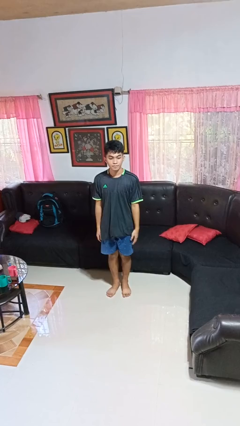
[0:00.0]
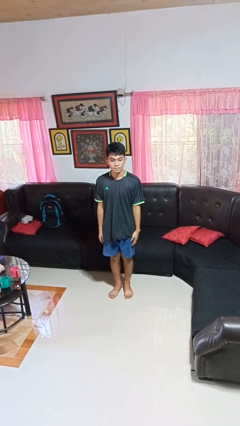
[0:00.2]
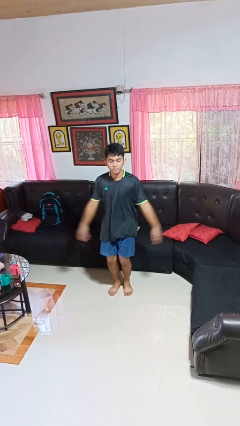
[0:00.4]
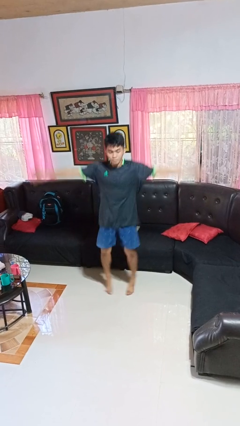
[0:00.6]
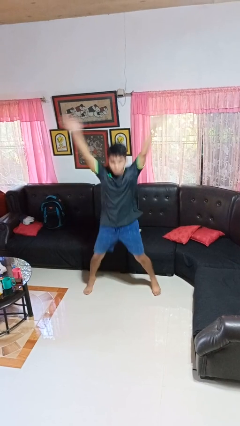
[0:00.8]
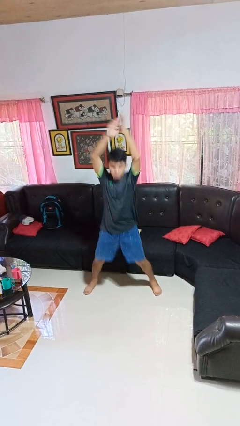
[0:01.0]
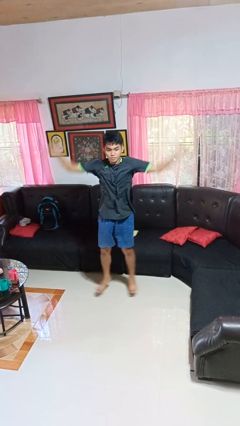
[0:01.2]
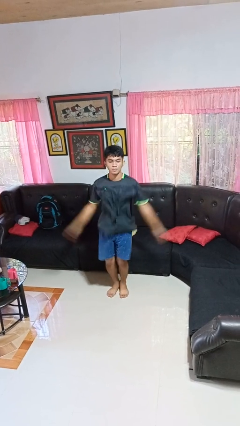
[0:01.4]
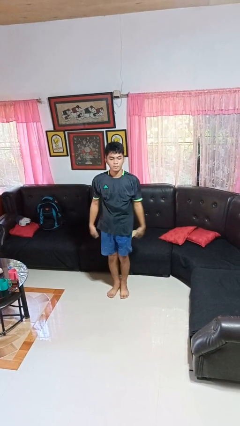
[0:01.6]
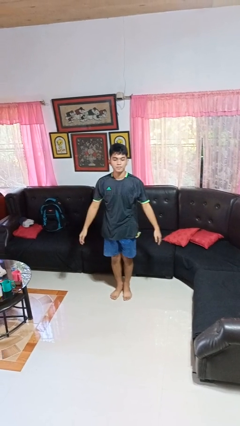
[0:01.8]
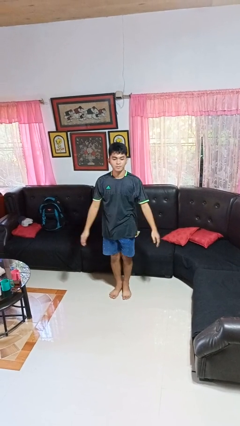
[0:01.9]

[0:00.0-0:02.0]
person exercises with jumping jacks

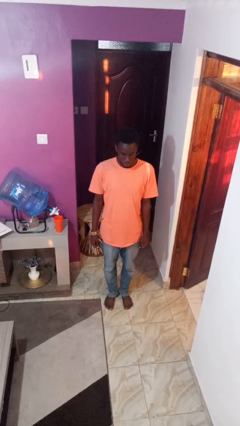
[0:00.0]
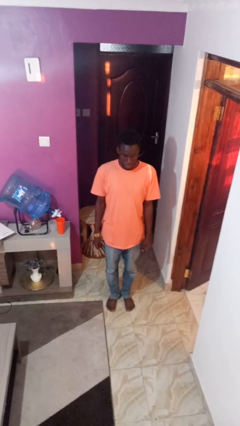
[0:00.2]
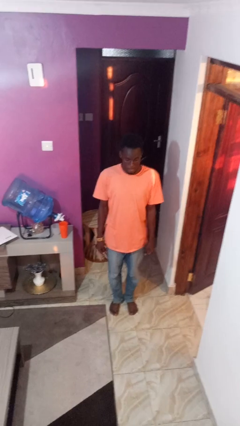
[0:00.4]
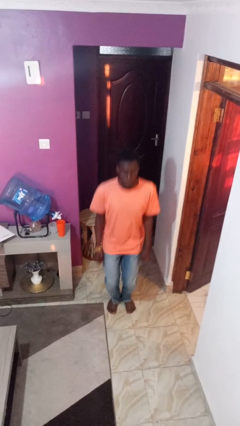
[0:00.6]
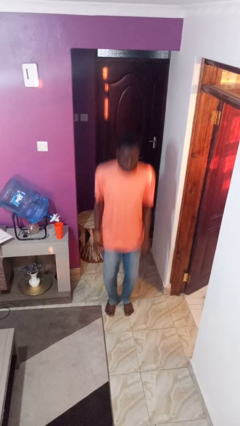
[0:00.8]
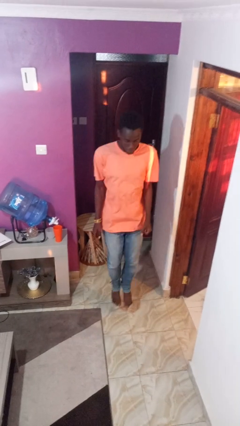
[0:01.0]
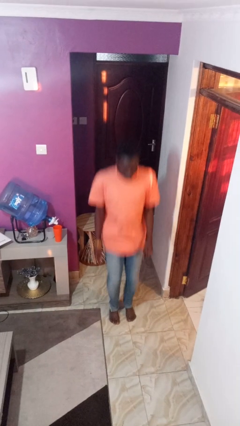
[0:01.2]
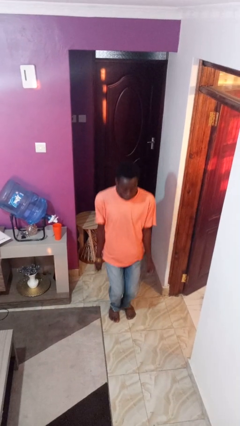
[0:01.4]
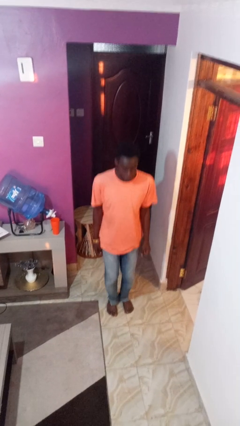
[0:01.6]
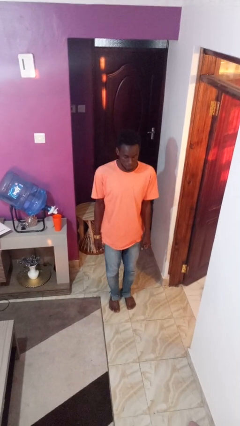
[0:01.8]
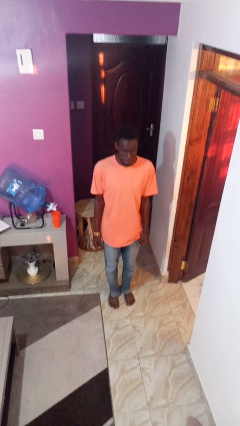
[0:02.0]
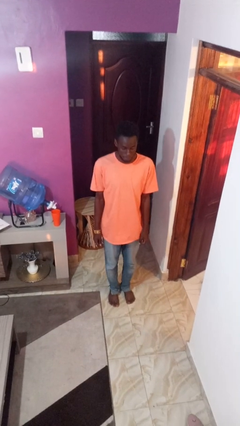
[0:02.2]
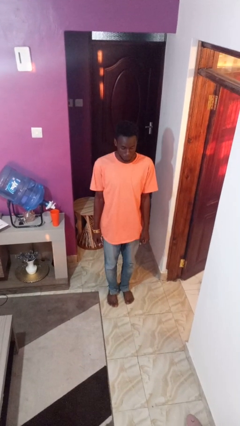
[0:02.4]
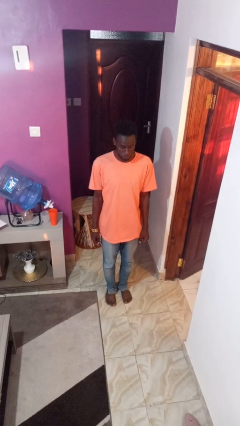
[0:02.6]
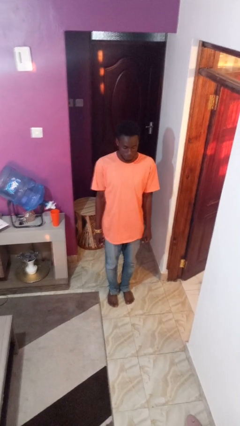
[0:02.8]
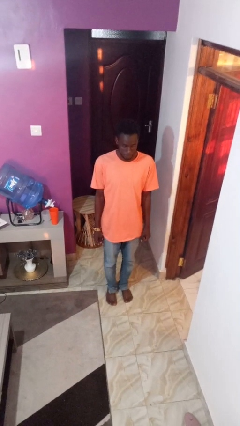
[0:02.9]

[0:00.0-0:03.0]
person jumps

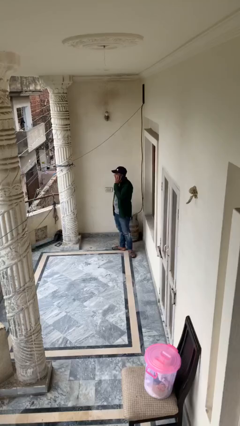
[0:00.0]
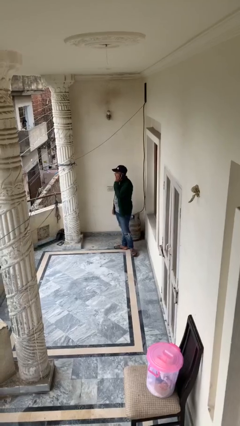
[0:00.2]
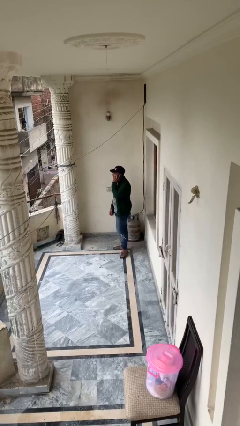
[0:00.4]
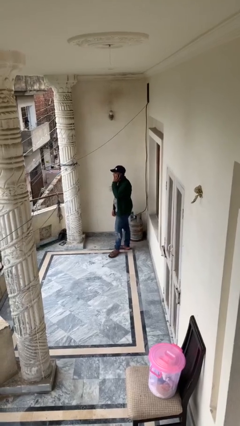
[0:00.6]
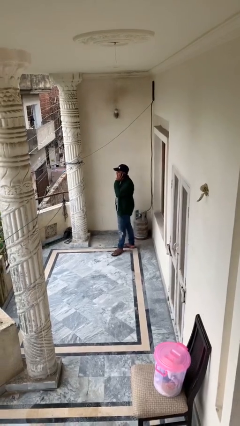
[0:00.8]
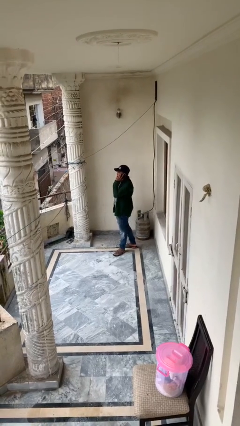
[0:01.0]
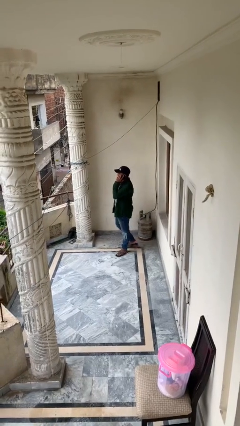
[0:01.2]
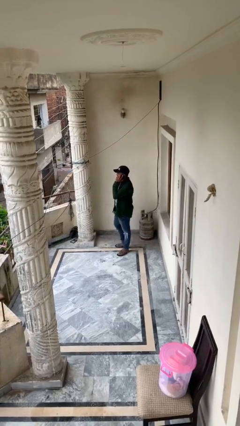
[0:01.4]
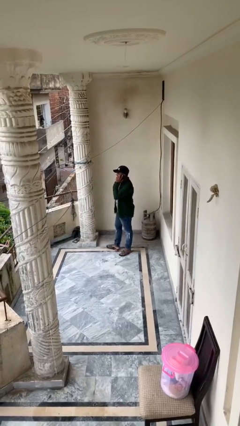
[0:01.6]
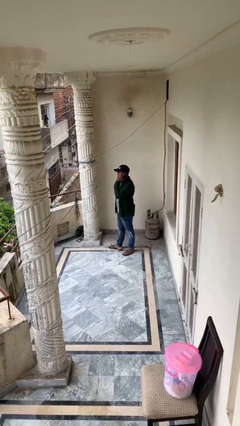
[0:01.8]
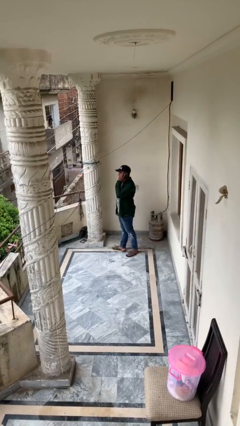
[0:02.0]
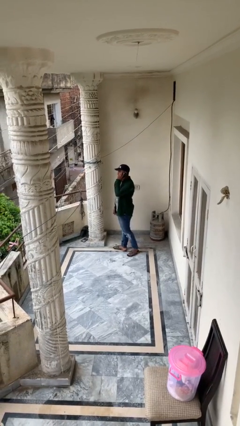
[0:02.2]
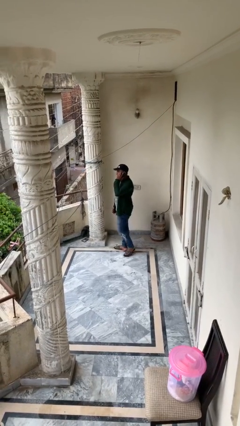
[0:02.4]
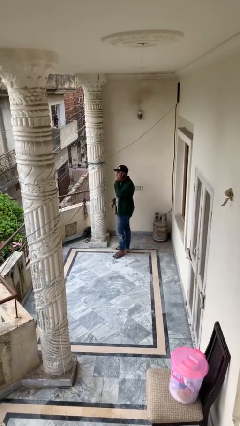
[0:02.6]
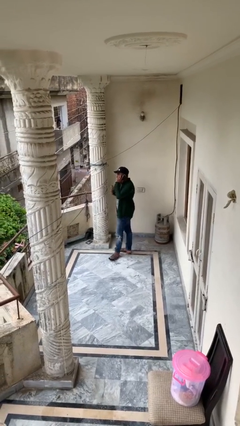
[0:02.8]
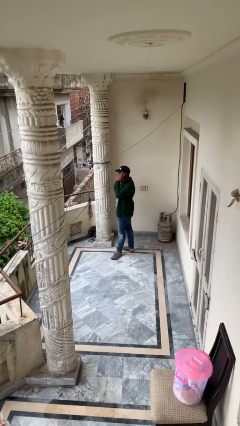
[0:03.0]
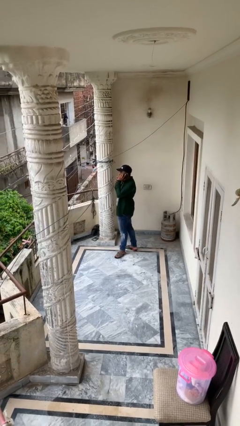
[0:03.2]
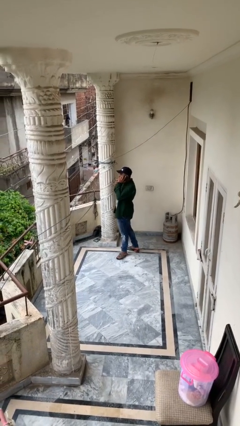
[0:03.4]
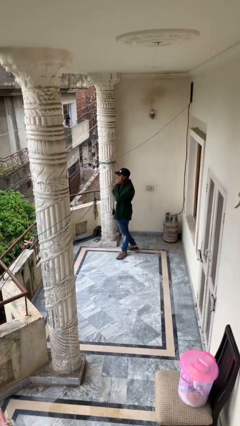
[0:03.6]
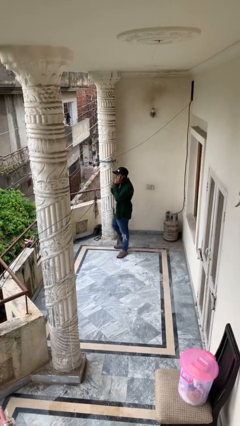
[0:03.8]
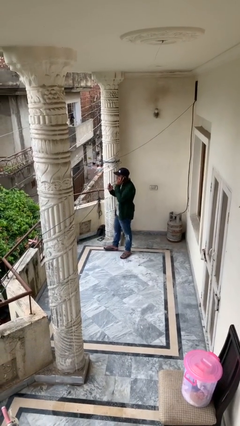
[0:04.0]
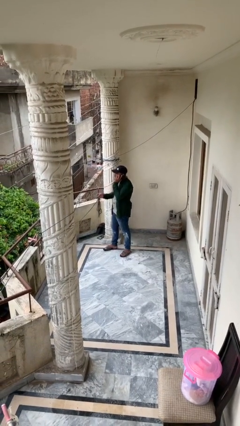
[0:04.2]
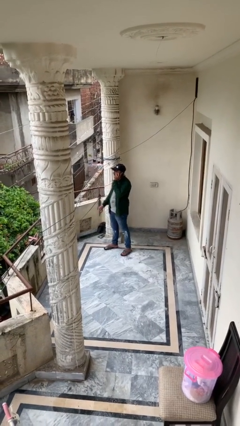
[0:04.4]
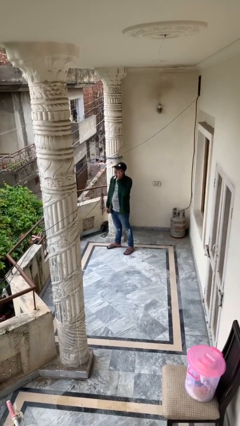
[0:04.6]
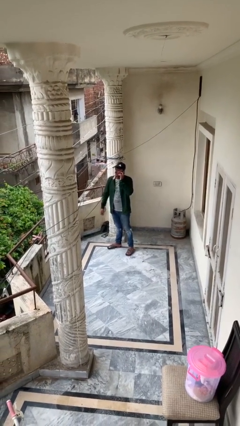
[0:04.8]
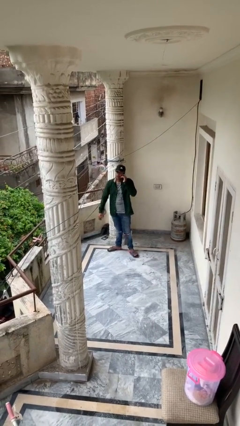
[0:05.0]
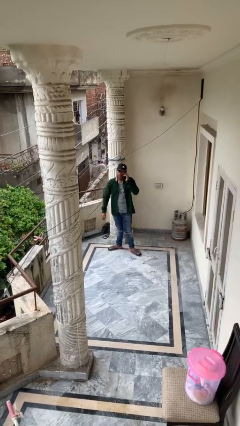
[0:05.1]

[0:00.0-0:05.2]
person talks on phone

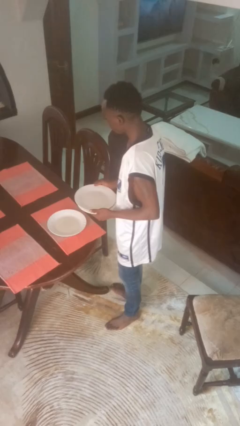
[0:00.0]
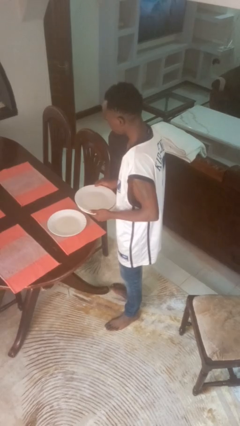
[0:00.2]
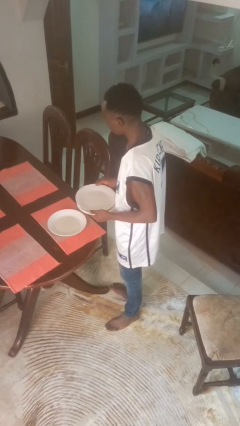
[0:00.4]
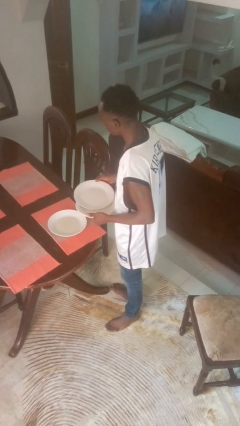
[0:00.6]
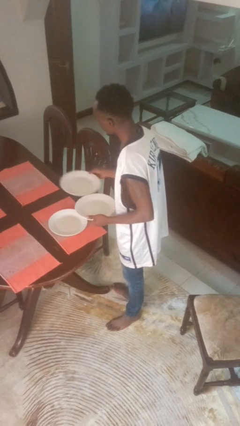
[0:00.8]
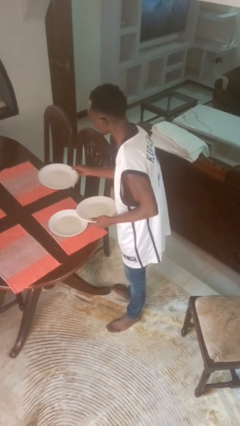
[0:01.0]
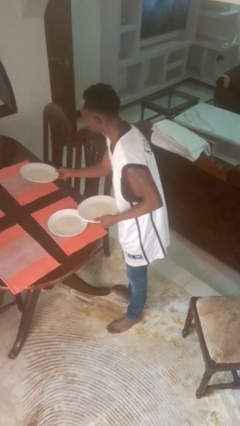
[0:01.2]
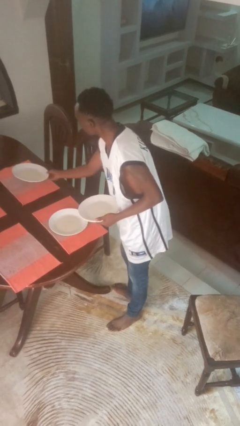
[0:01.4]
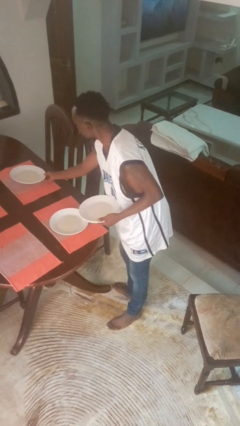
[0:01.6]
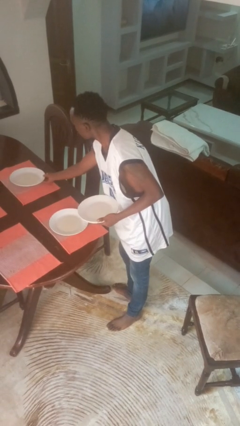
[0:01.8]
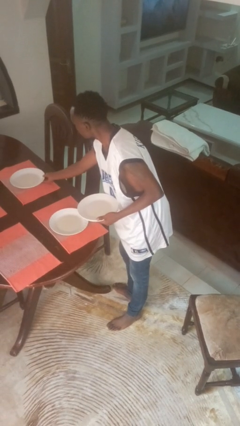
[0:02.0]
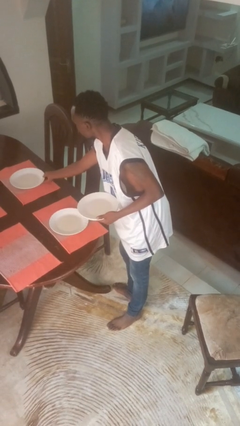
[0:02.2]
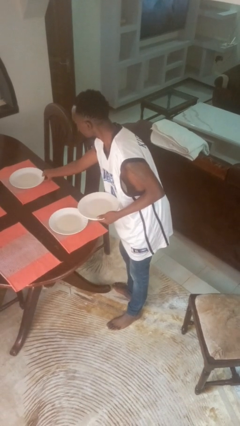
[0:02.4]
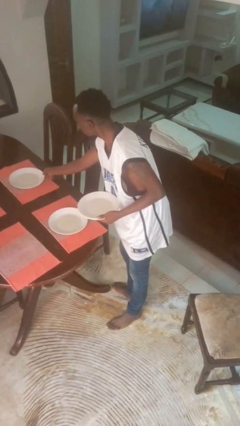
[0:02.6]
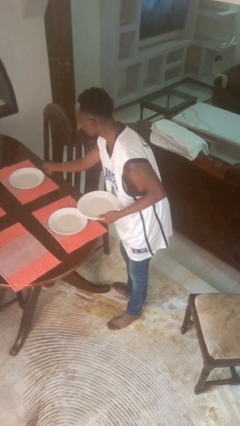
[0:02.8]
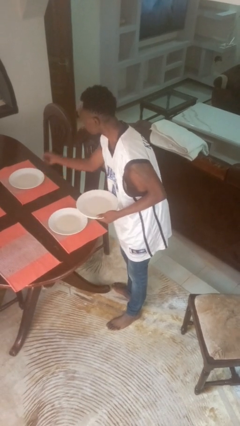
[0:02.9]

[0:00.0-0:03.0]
person sets table

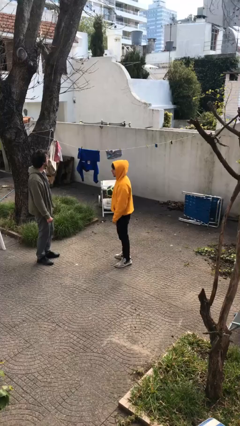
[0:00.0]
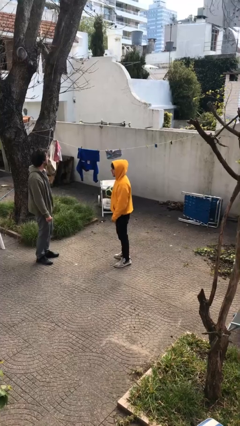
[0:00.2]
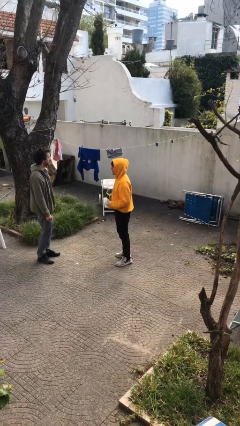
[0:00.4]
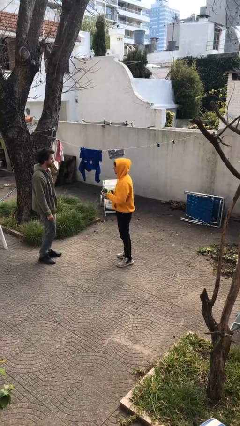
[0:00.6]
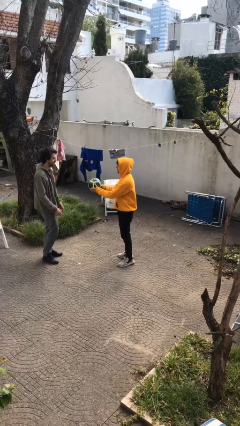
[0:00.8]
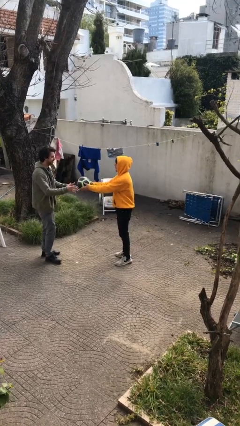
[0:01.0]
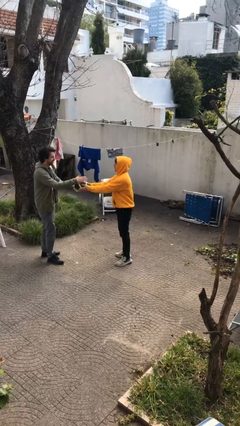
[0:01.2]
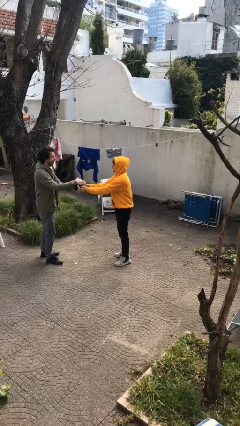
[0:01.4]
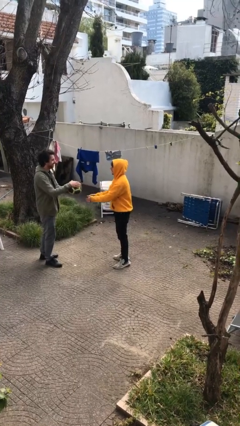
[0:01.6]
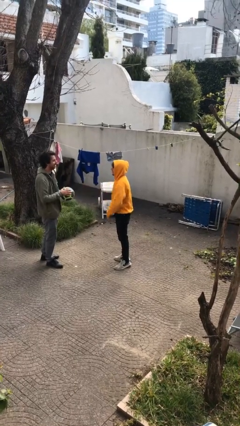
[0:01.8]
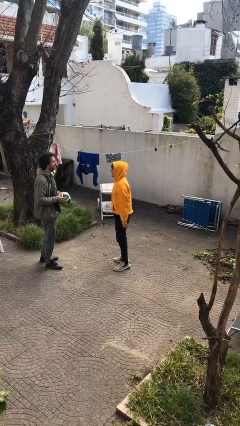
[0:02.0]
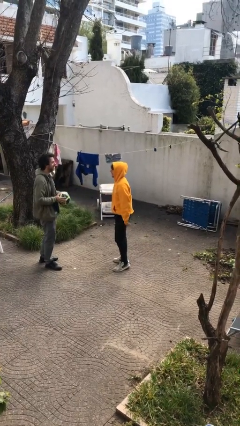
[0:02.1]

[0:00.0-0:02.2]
person transfers object to person

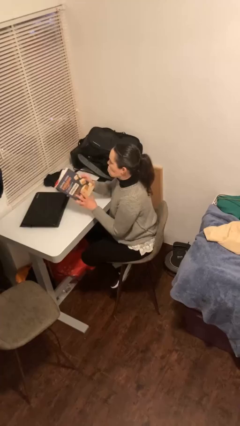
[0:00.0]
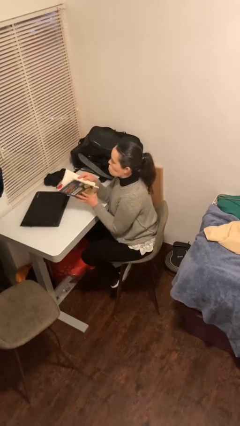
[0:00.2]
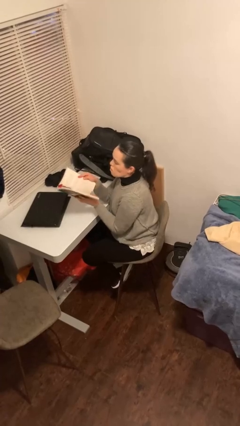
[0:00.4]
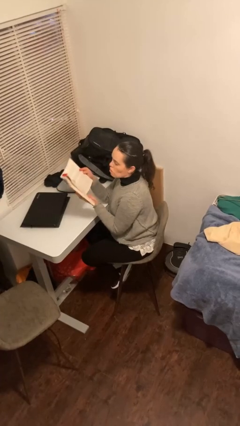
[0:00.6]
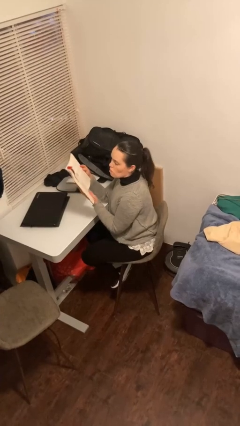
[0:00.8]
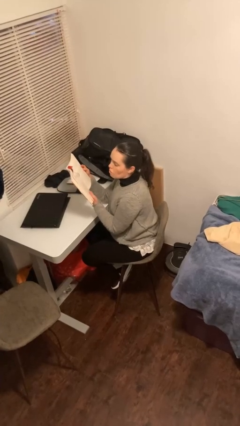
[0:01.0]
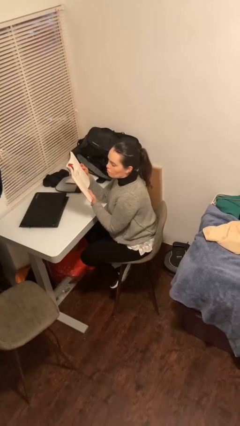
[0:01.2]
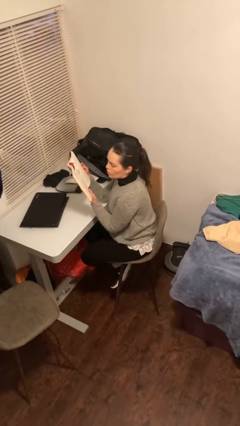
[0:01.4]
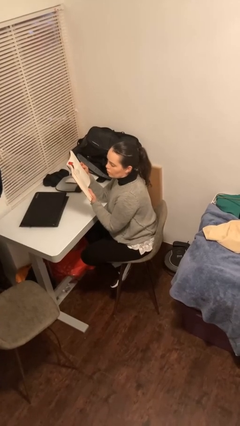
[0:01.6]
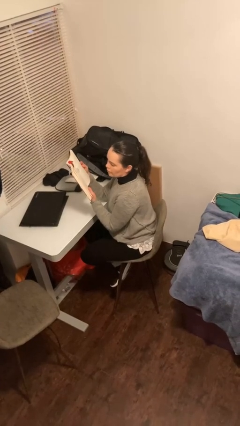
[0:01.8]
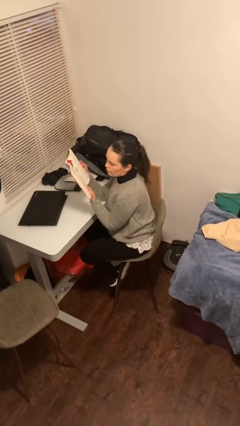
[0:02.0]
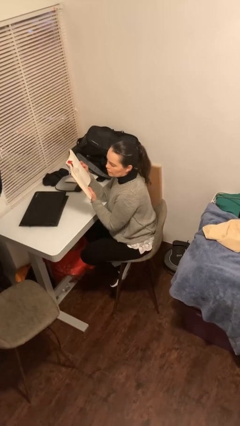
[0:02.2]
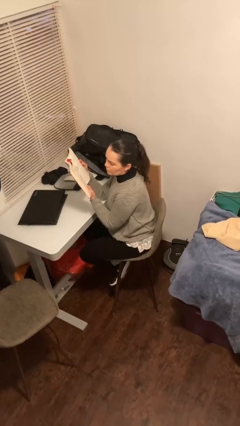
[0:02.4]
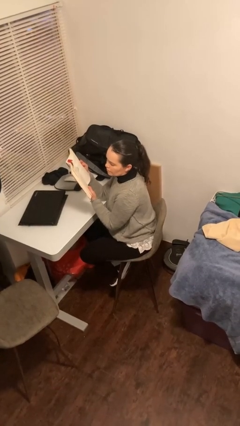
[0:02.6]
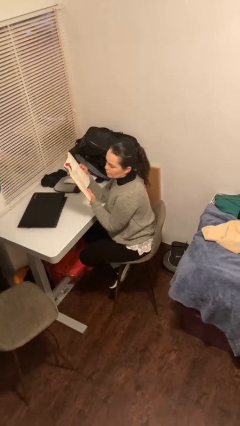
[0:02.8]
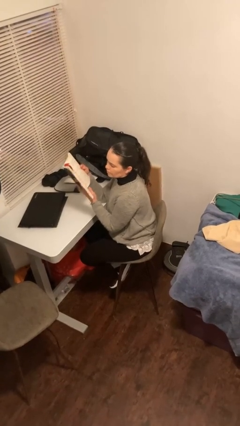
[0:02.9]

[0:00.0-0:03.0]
person reads document
